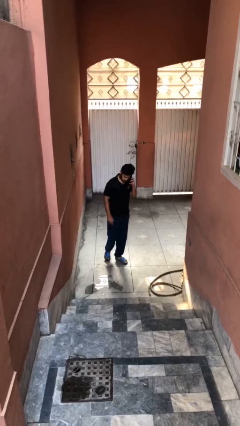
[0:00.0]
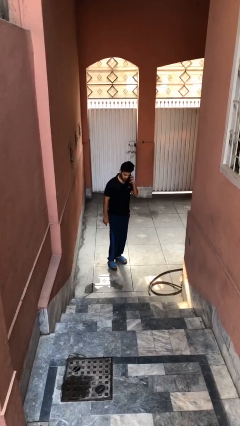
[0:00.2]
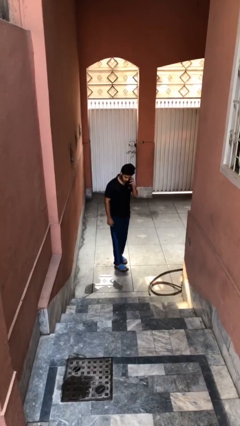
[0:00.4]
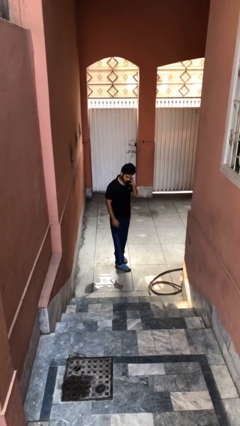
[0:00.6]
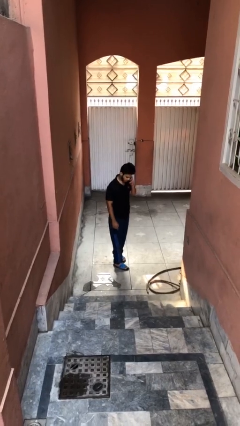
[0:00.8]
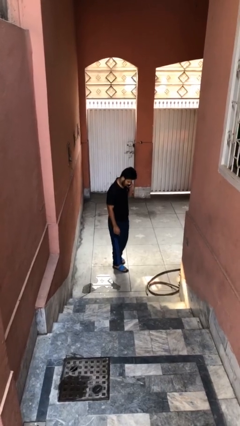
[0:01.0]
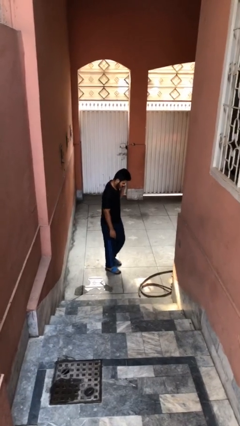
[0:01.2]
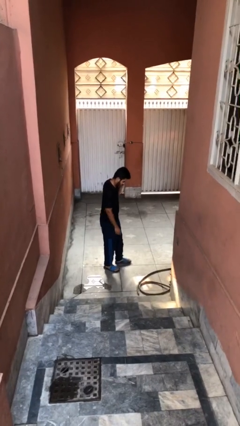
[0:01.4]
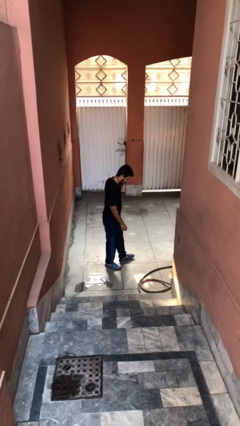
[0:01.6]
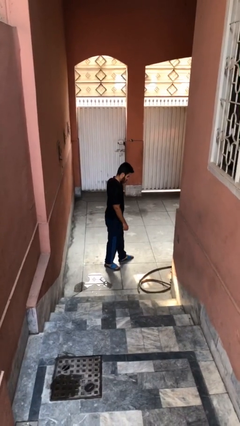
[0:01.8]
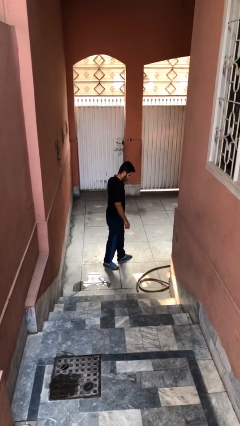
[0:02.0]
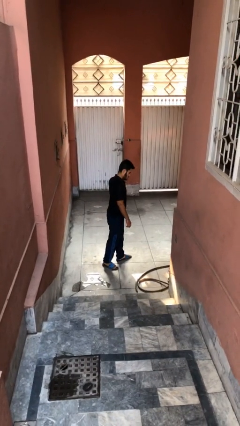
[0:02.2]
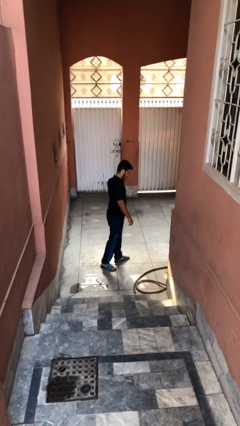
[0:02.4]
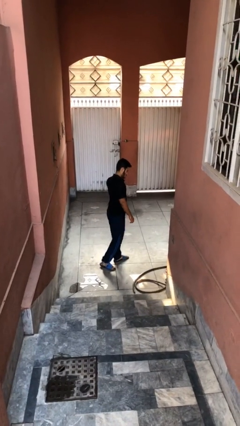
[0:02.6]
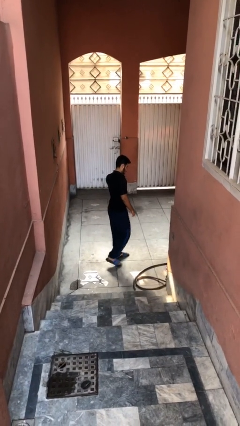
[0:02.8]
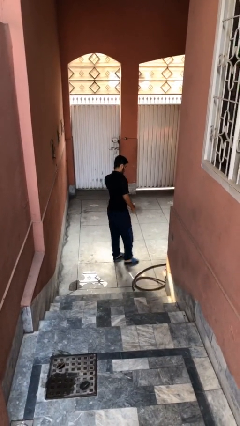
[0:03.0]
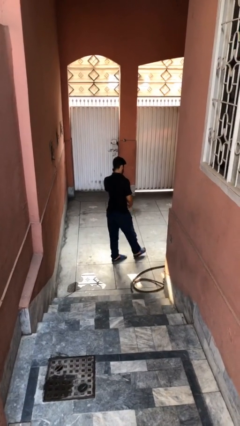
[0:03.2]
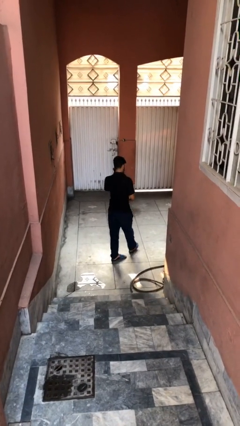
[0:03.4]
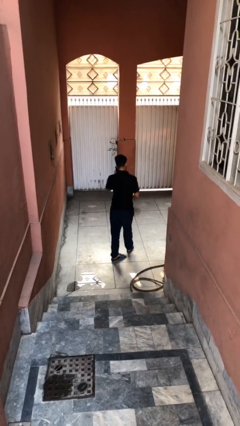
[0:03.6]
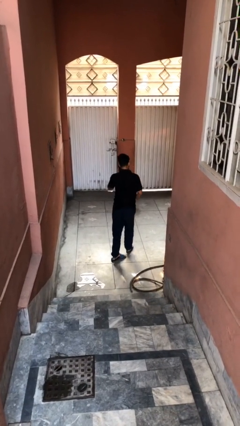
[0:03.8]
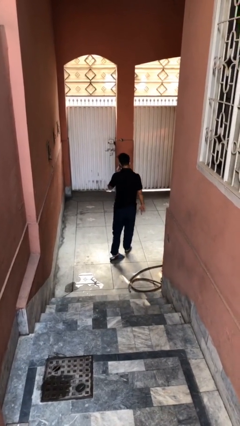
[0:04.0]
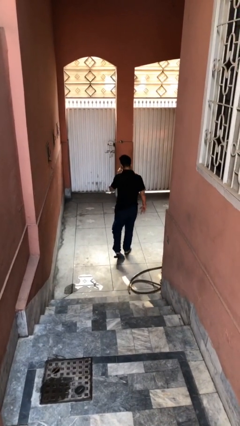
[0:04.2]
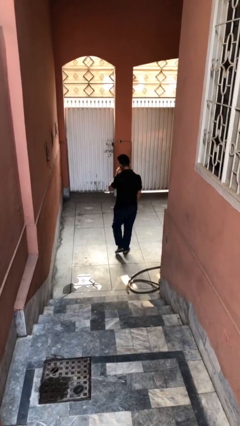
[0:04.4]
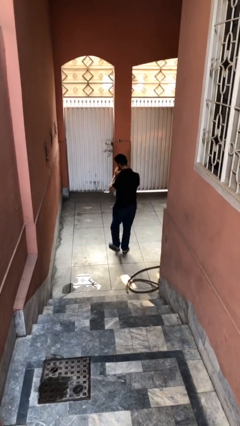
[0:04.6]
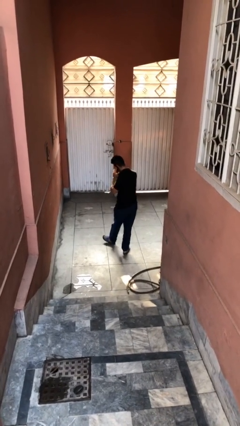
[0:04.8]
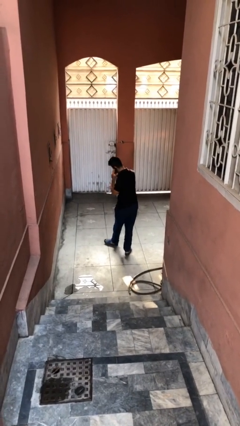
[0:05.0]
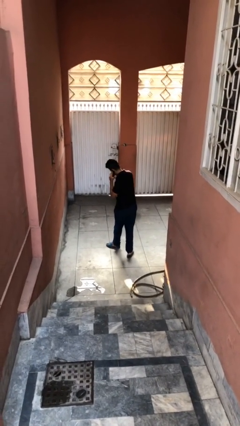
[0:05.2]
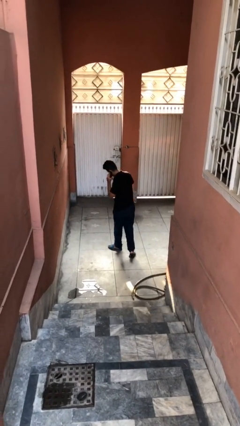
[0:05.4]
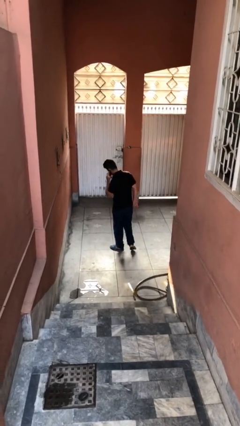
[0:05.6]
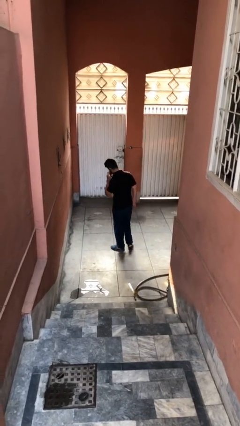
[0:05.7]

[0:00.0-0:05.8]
person talks on phone

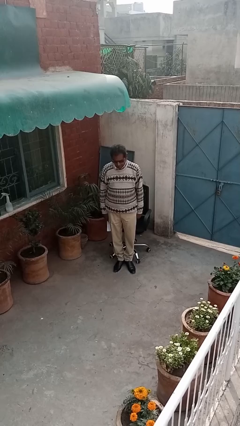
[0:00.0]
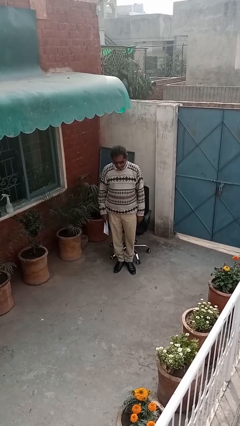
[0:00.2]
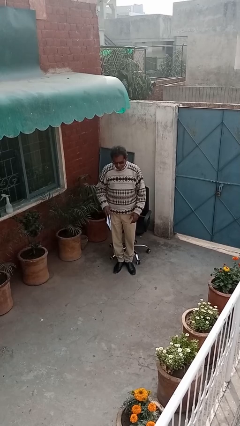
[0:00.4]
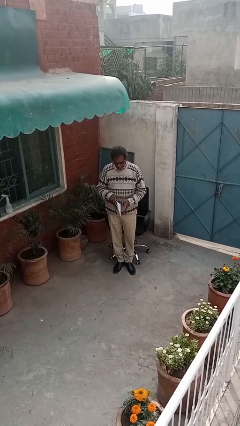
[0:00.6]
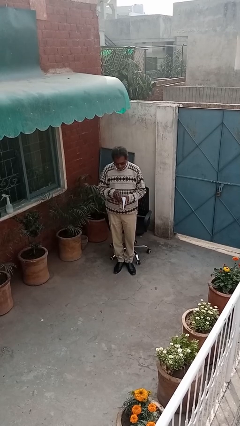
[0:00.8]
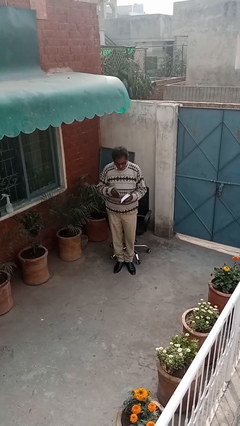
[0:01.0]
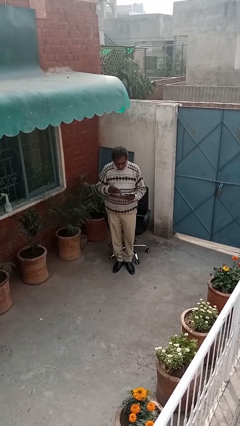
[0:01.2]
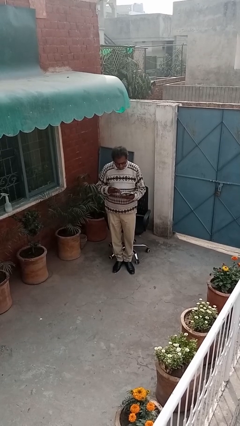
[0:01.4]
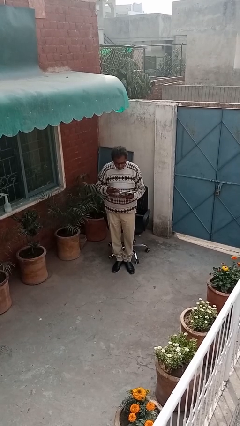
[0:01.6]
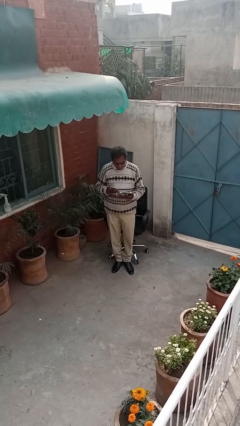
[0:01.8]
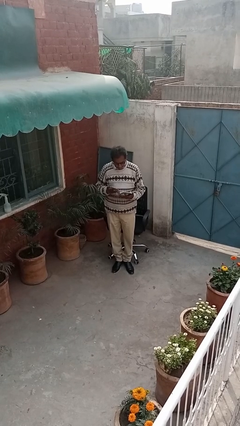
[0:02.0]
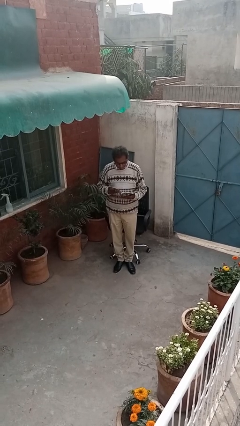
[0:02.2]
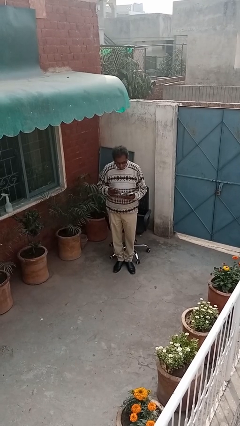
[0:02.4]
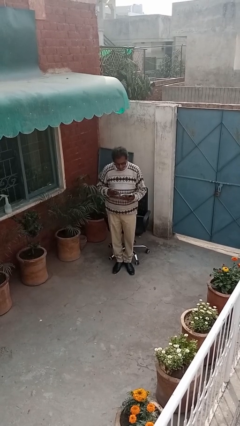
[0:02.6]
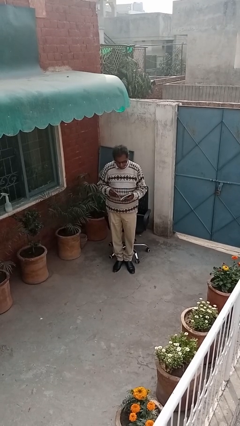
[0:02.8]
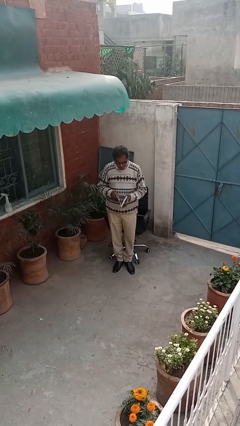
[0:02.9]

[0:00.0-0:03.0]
person reads document

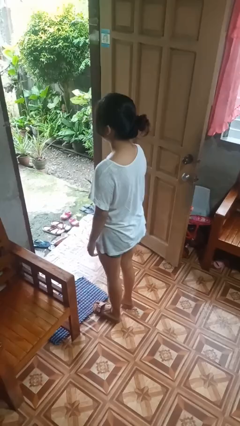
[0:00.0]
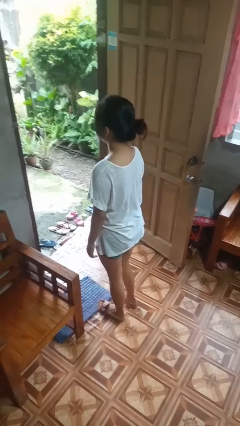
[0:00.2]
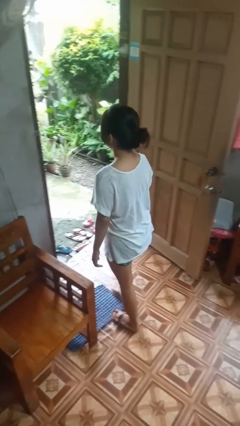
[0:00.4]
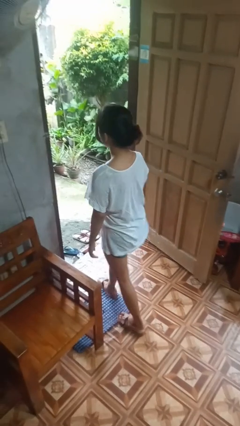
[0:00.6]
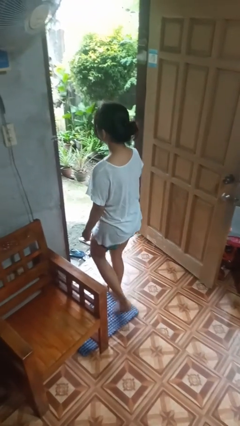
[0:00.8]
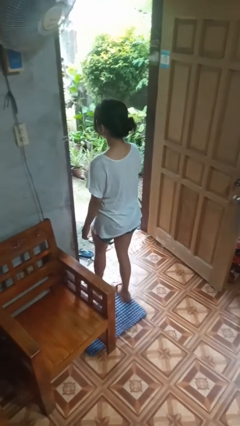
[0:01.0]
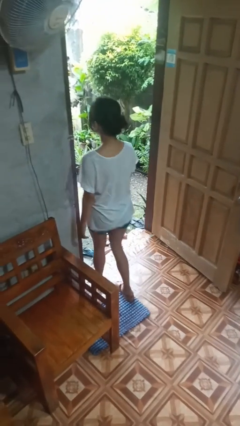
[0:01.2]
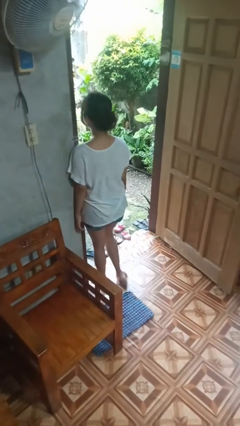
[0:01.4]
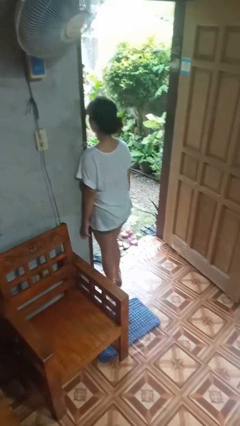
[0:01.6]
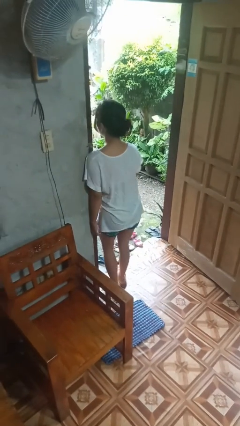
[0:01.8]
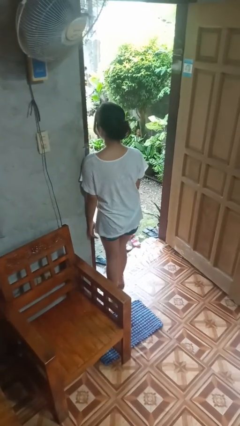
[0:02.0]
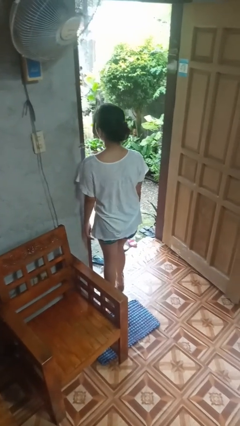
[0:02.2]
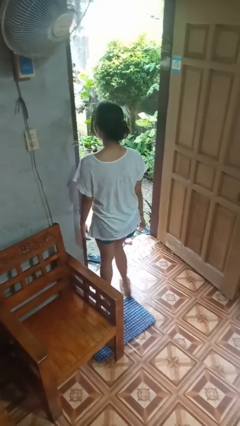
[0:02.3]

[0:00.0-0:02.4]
person bumps into wall

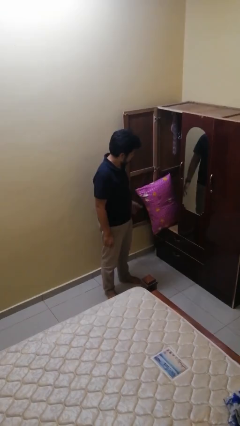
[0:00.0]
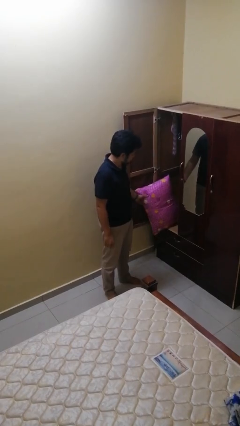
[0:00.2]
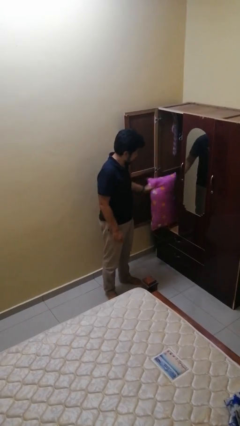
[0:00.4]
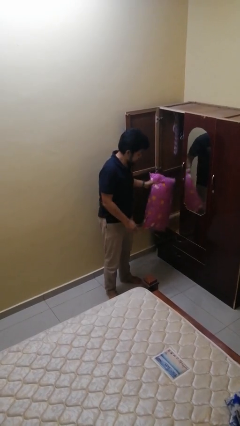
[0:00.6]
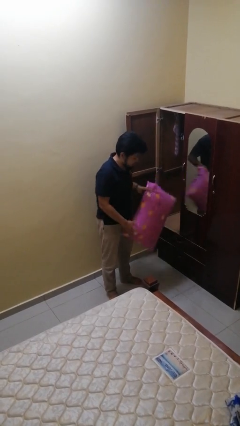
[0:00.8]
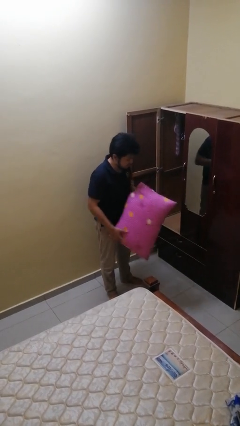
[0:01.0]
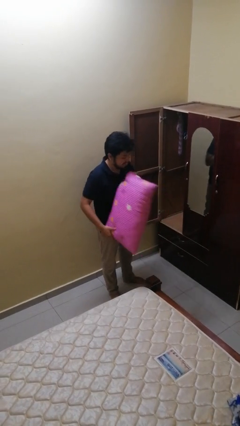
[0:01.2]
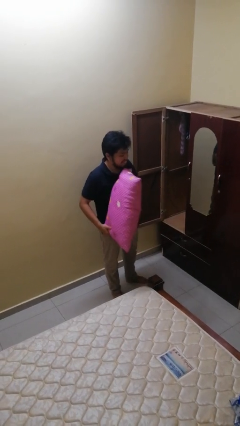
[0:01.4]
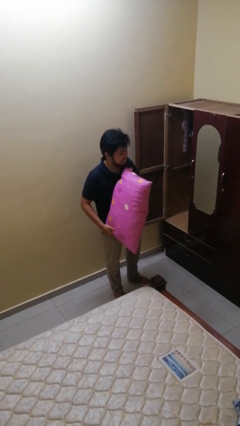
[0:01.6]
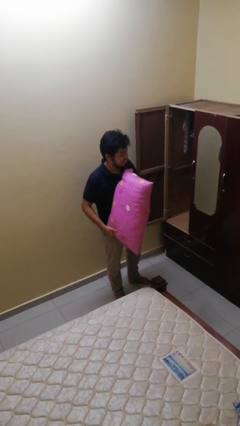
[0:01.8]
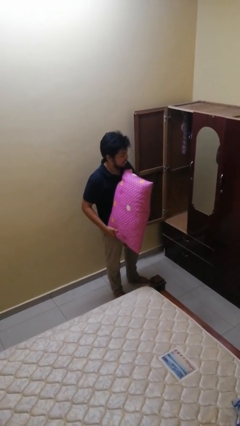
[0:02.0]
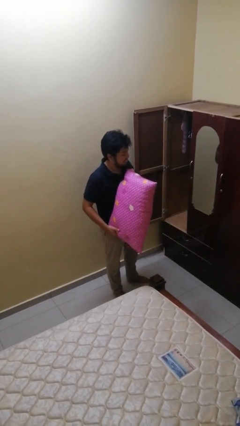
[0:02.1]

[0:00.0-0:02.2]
person picks up object from cabinet

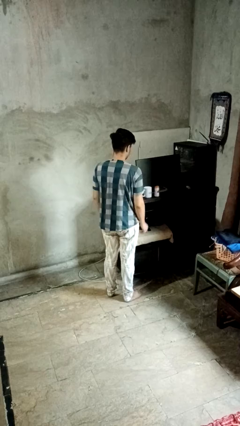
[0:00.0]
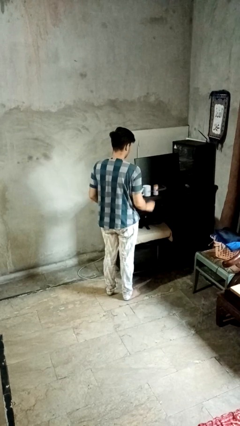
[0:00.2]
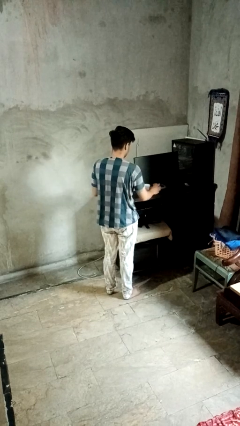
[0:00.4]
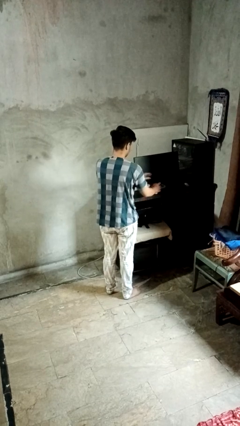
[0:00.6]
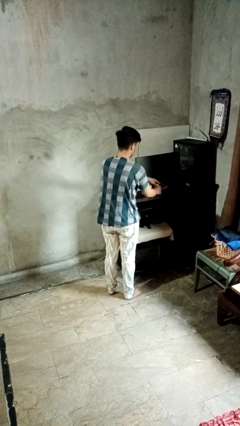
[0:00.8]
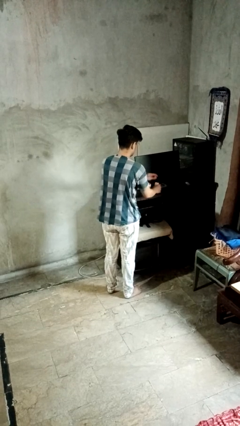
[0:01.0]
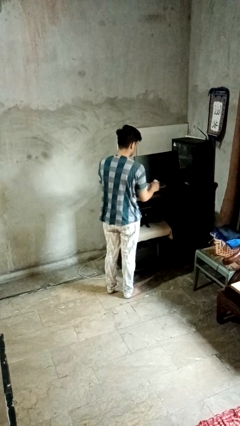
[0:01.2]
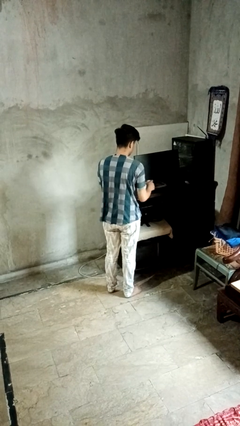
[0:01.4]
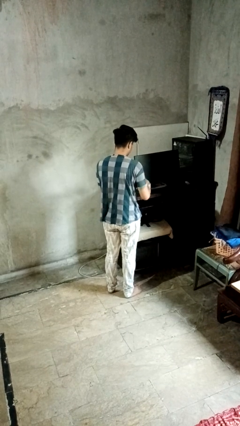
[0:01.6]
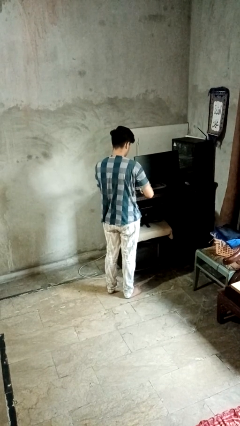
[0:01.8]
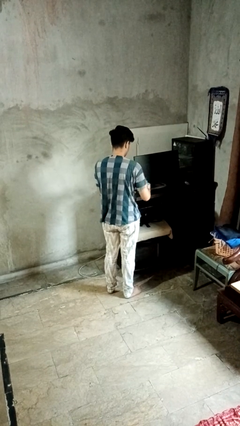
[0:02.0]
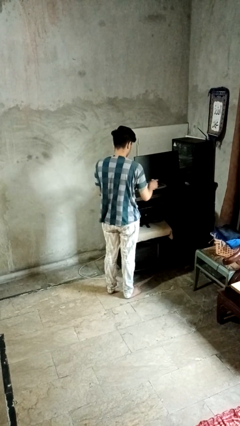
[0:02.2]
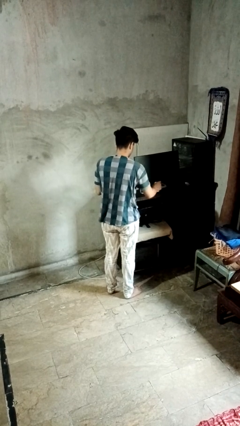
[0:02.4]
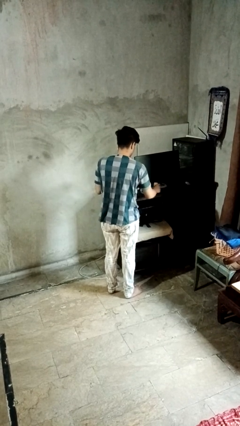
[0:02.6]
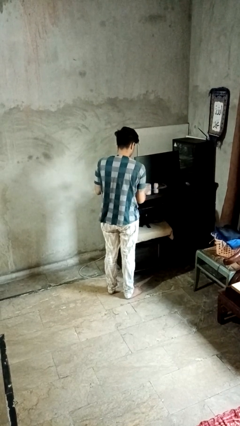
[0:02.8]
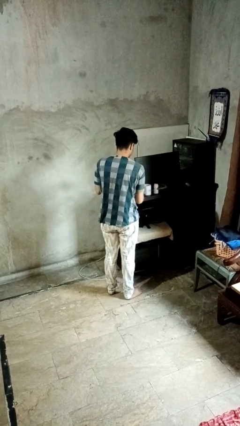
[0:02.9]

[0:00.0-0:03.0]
person takes medicine pills

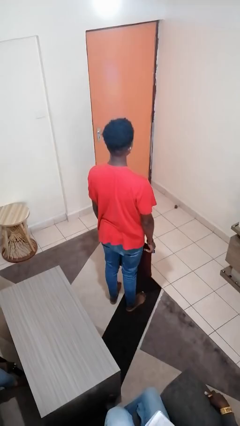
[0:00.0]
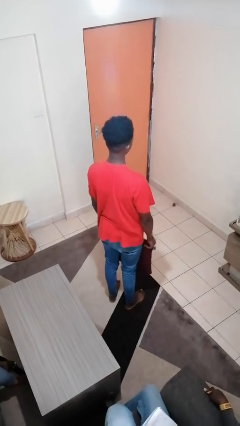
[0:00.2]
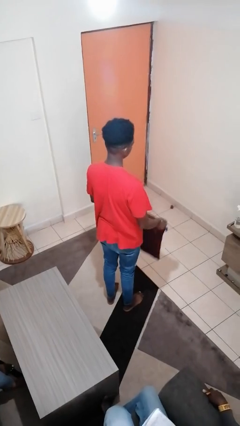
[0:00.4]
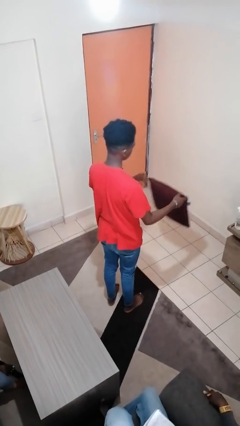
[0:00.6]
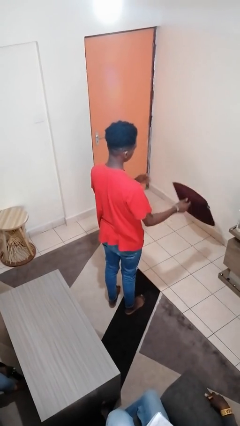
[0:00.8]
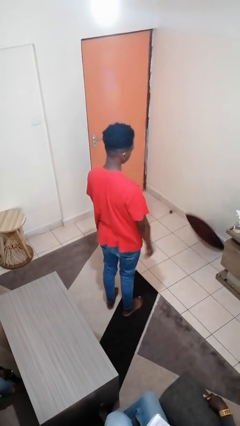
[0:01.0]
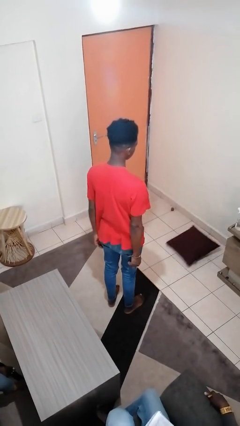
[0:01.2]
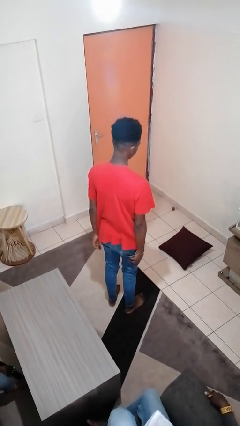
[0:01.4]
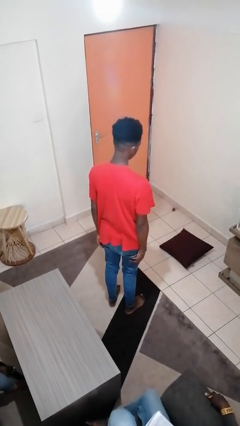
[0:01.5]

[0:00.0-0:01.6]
person throws object to ground
